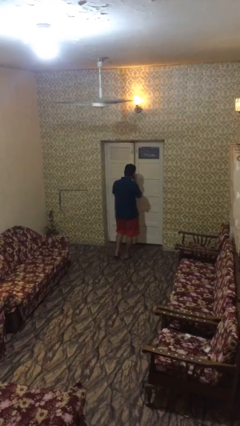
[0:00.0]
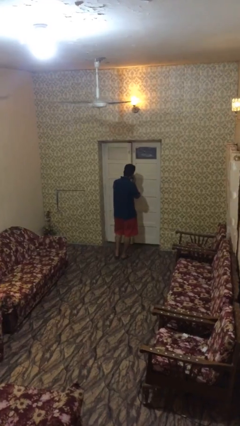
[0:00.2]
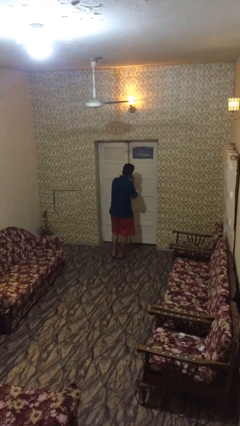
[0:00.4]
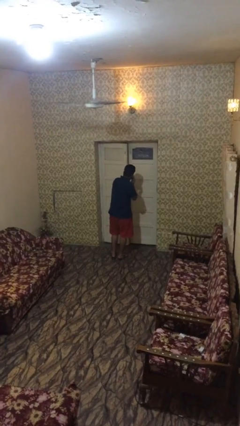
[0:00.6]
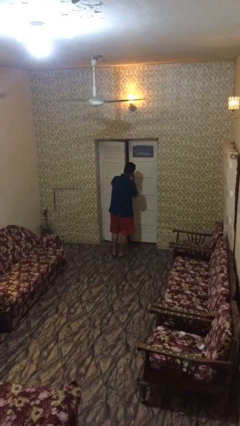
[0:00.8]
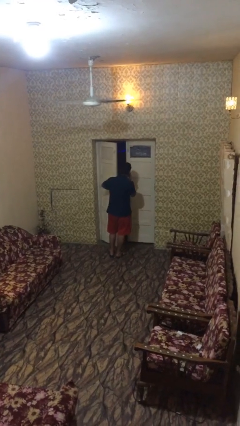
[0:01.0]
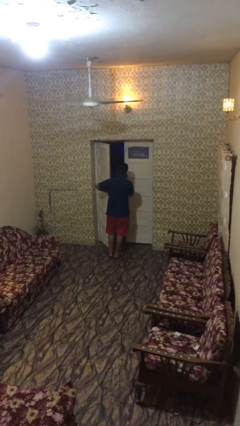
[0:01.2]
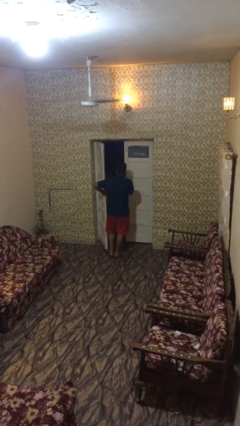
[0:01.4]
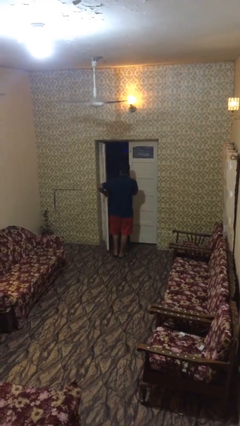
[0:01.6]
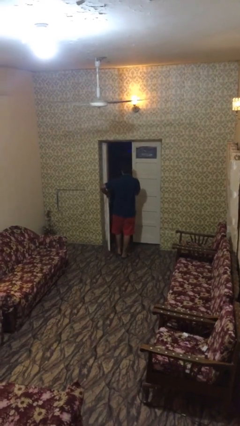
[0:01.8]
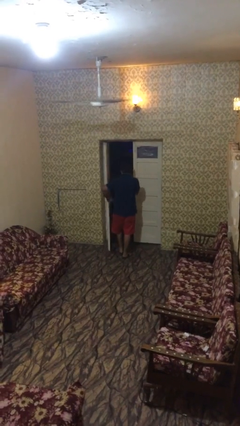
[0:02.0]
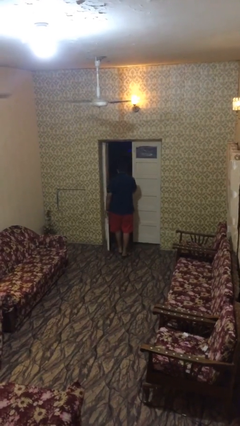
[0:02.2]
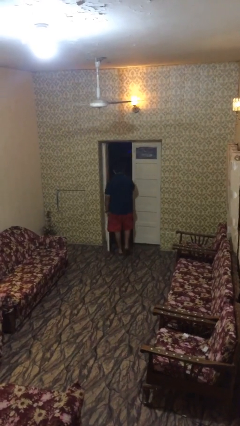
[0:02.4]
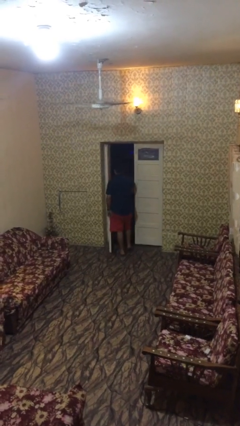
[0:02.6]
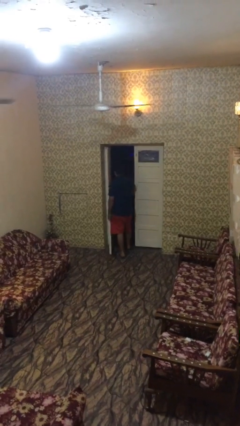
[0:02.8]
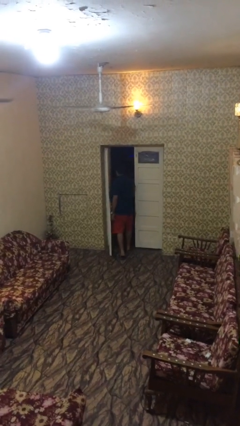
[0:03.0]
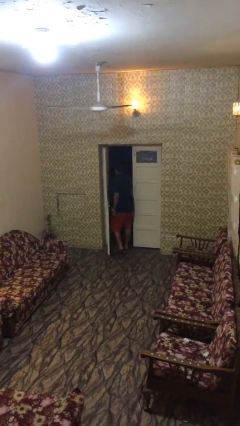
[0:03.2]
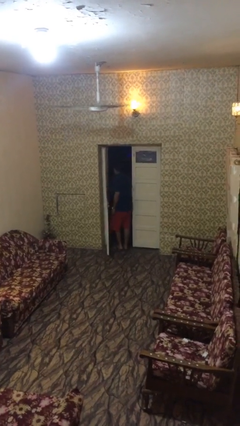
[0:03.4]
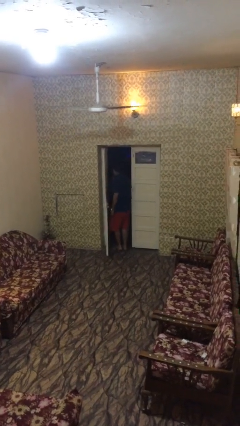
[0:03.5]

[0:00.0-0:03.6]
person opens facility door

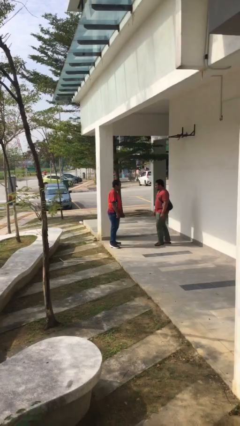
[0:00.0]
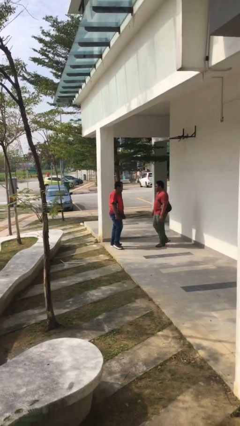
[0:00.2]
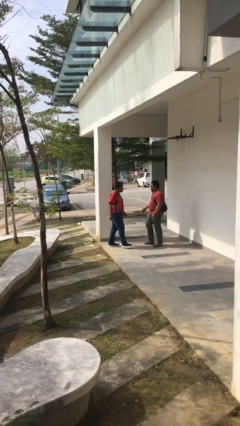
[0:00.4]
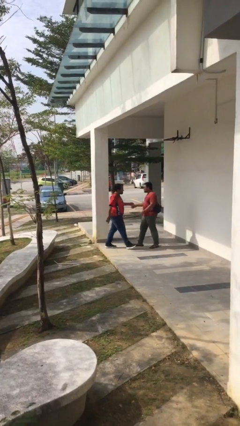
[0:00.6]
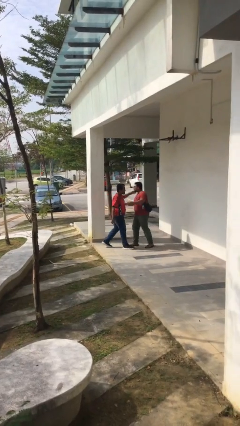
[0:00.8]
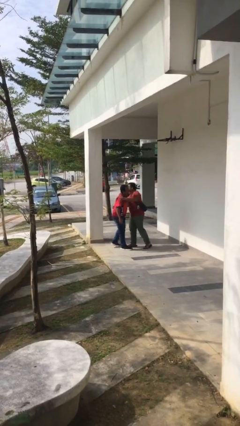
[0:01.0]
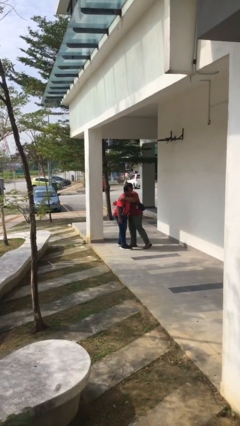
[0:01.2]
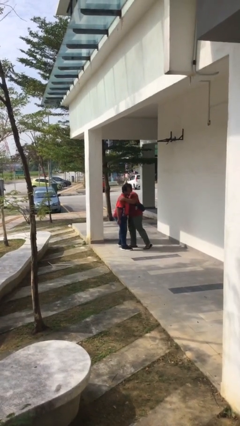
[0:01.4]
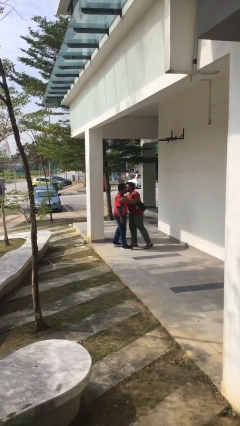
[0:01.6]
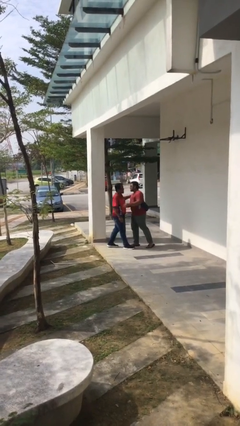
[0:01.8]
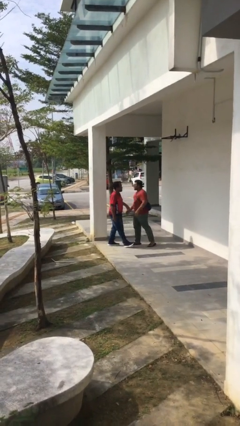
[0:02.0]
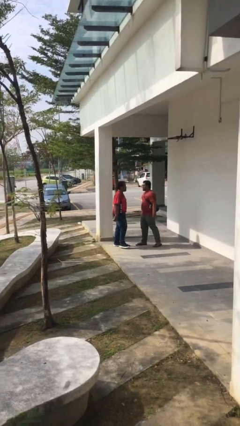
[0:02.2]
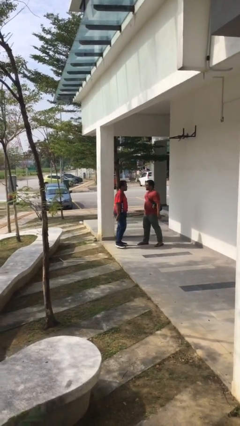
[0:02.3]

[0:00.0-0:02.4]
person embraces person

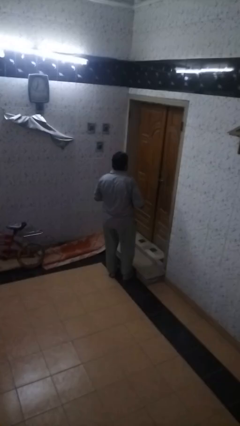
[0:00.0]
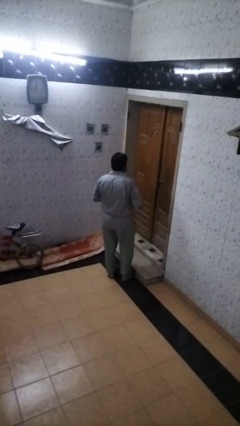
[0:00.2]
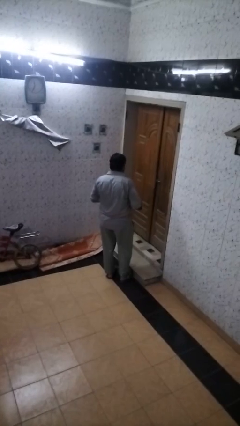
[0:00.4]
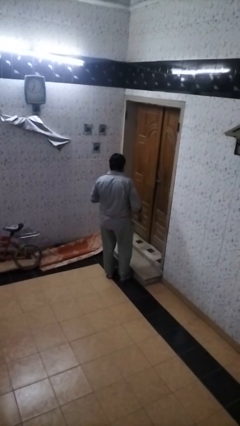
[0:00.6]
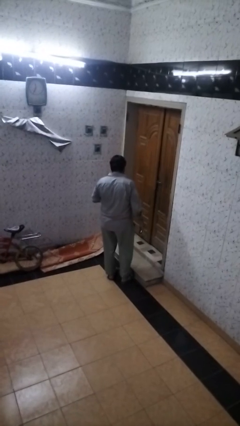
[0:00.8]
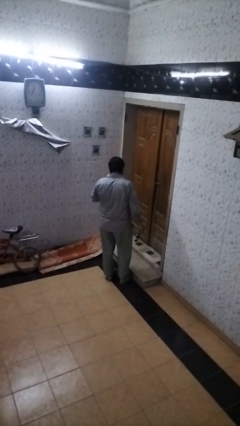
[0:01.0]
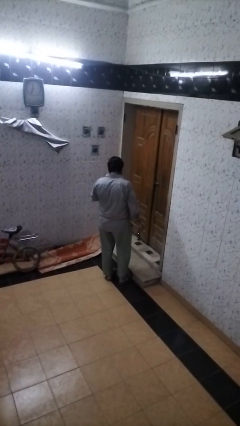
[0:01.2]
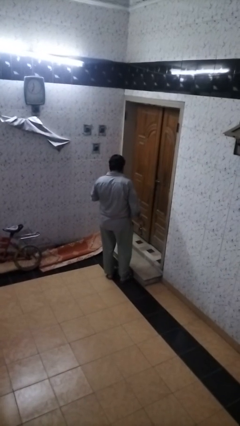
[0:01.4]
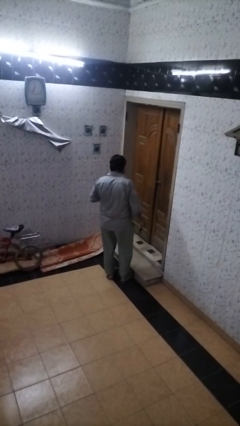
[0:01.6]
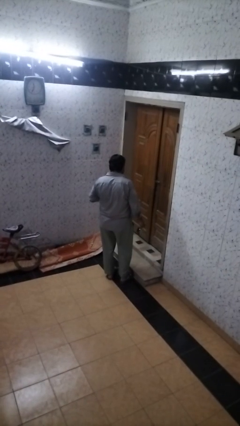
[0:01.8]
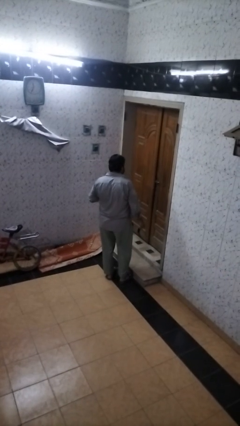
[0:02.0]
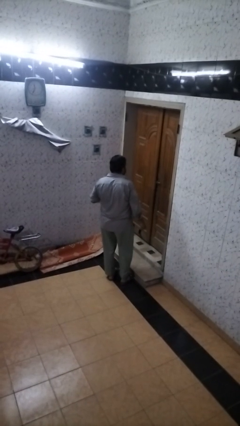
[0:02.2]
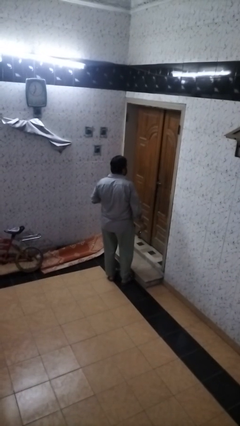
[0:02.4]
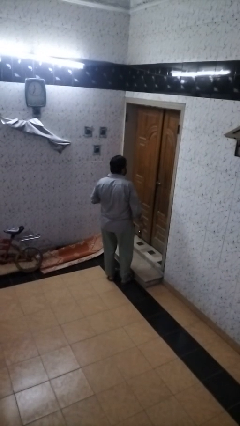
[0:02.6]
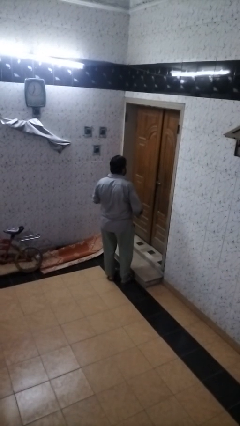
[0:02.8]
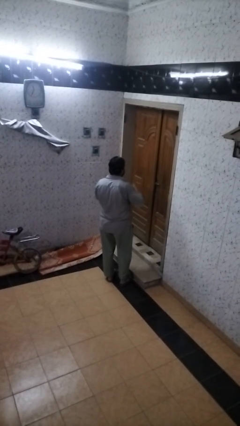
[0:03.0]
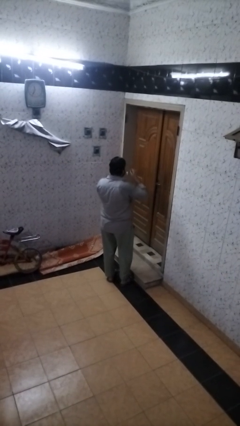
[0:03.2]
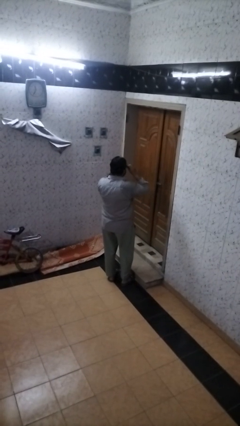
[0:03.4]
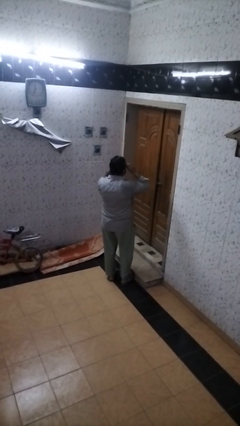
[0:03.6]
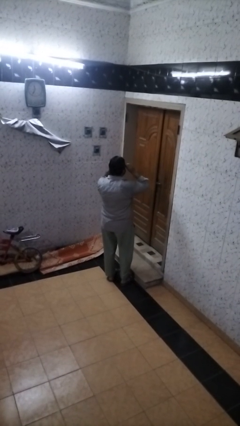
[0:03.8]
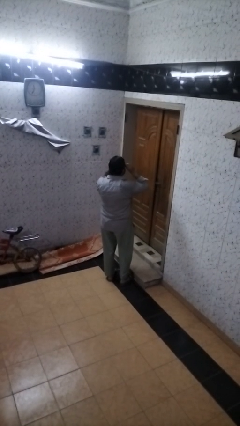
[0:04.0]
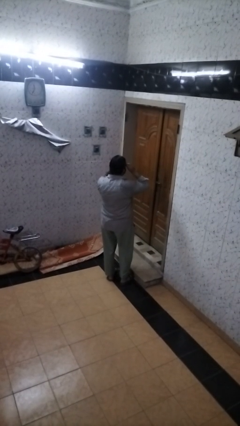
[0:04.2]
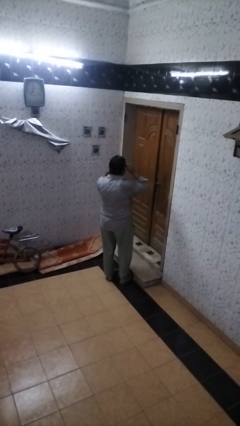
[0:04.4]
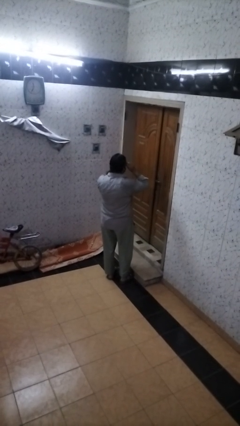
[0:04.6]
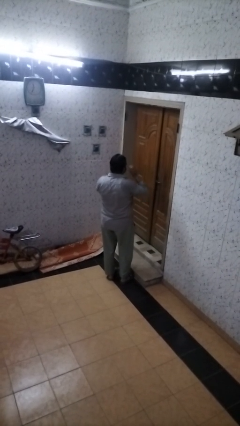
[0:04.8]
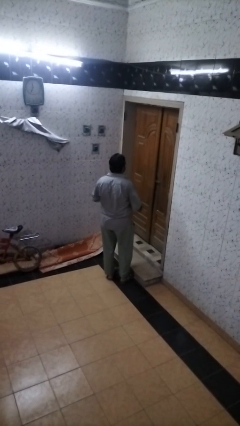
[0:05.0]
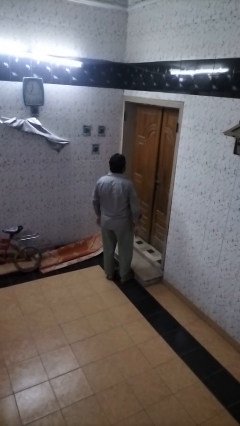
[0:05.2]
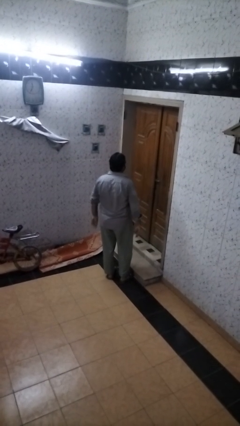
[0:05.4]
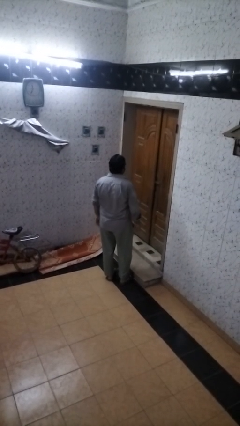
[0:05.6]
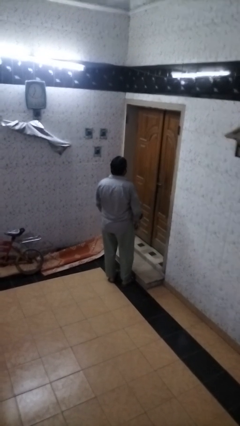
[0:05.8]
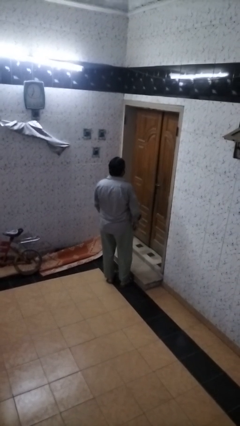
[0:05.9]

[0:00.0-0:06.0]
person puts on sunglasses

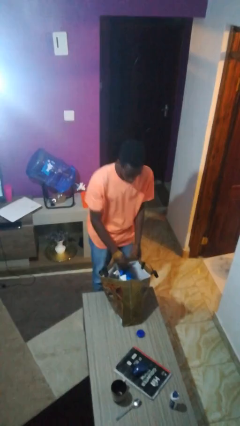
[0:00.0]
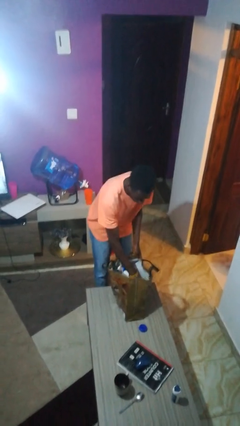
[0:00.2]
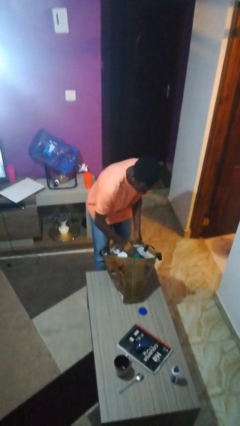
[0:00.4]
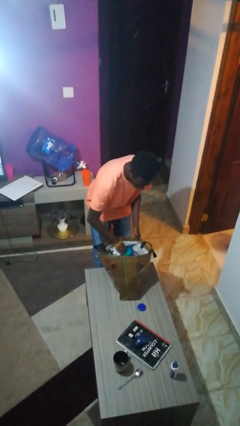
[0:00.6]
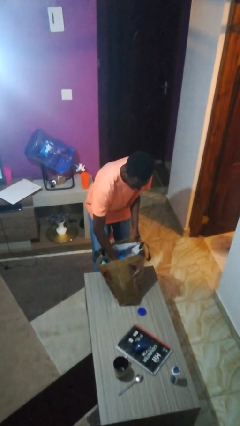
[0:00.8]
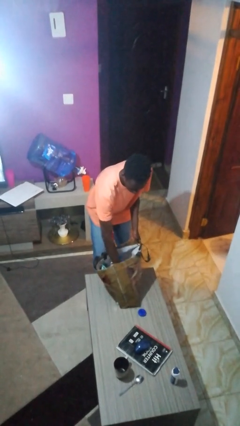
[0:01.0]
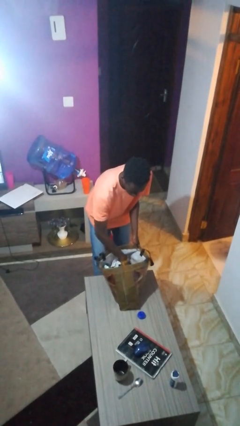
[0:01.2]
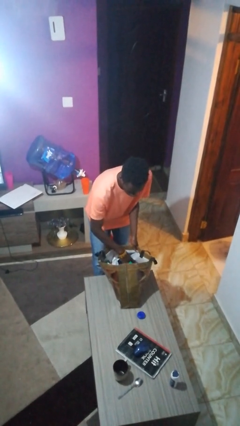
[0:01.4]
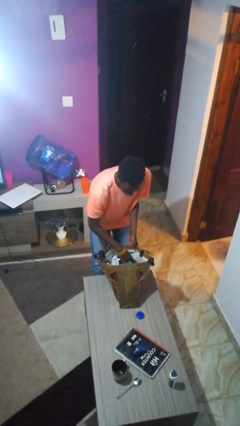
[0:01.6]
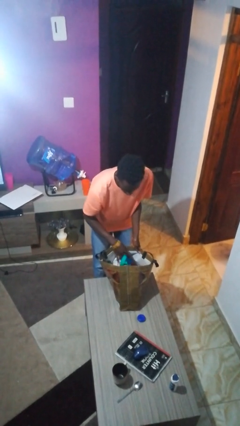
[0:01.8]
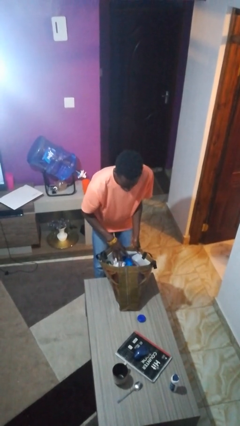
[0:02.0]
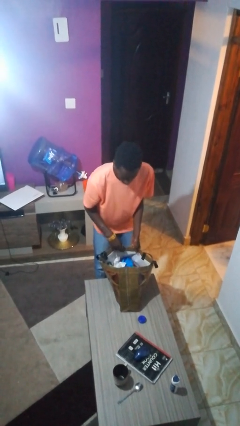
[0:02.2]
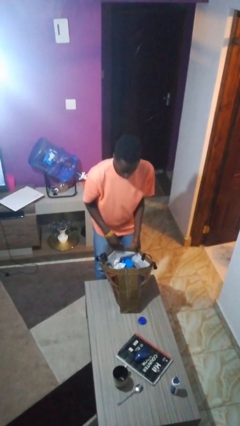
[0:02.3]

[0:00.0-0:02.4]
person searches in bag

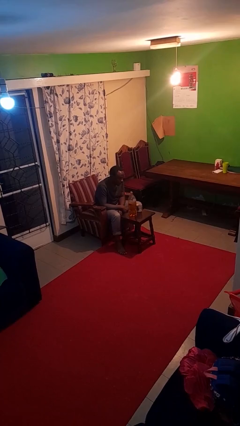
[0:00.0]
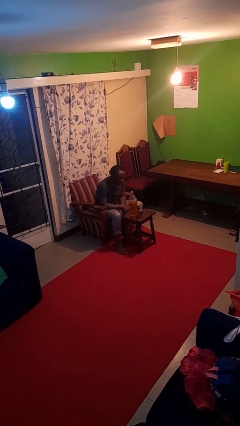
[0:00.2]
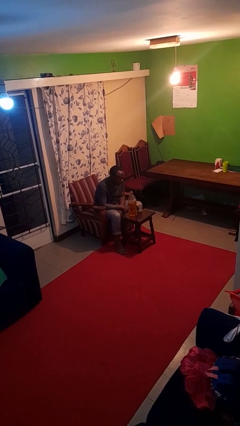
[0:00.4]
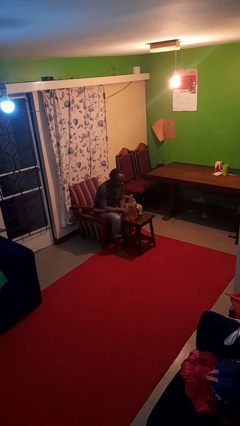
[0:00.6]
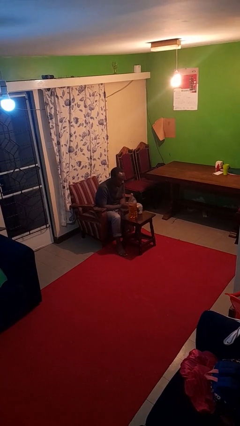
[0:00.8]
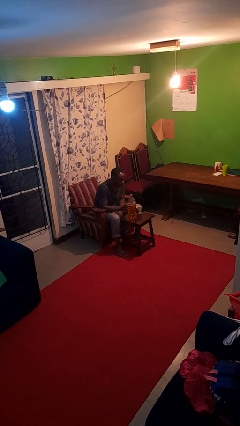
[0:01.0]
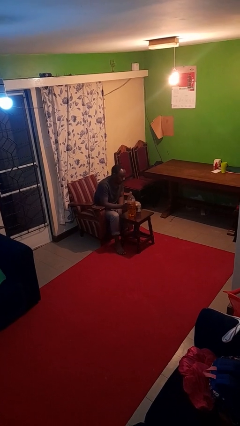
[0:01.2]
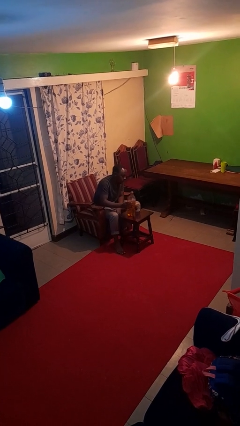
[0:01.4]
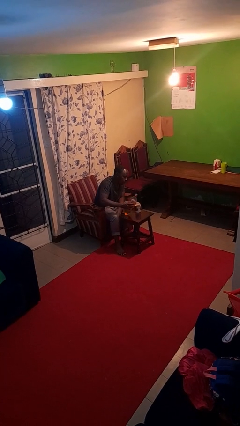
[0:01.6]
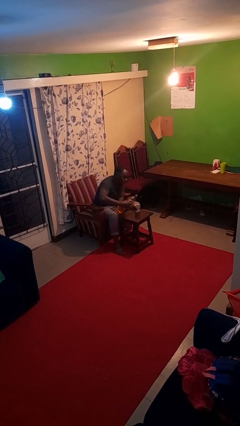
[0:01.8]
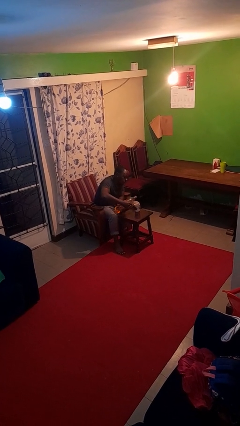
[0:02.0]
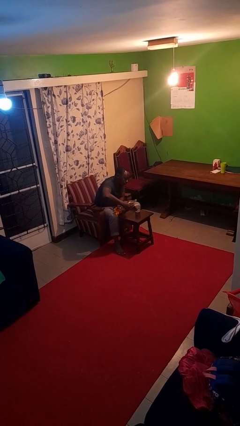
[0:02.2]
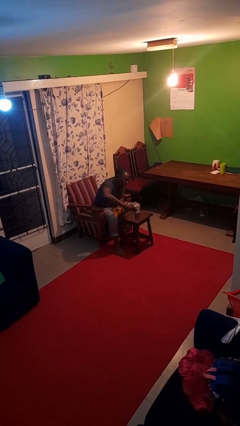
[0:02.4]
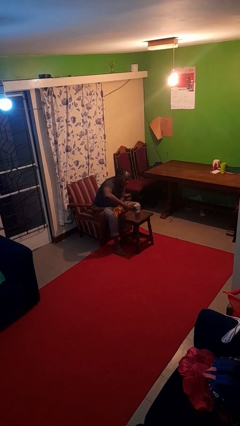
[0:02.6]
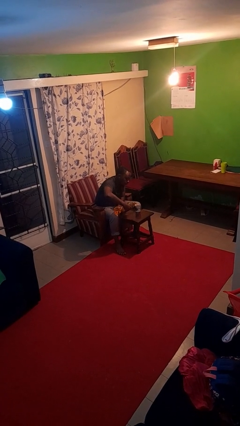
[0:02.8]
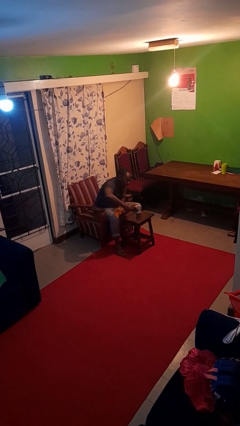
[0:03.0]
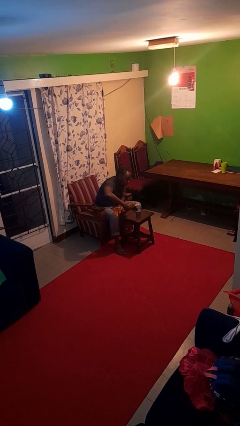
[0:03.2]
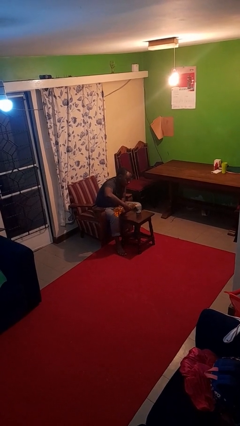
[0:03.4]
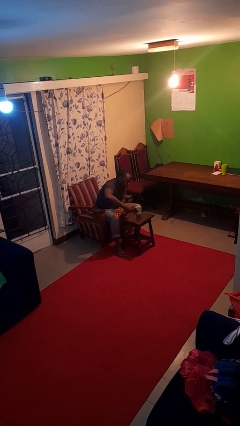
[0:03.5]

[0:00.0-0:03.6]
person pours liquid into cup
